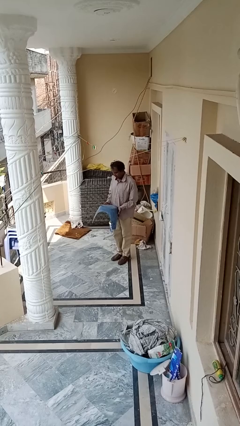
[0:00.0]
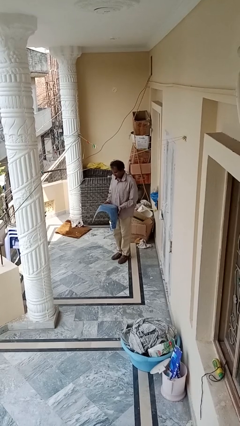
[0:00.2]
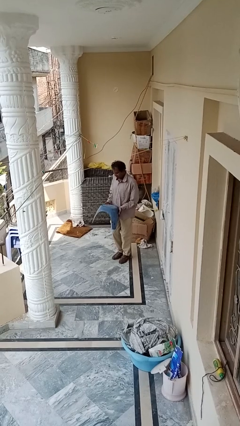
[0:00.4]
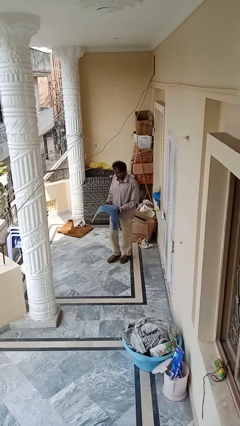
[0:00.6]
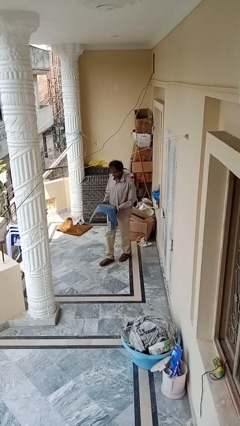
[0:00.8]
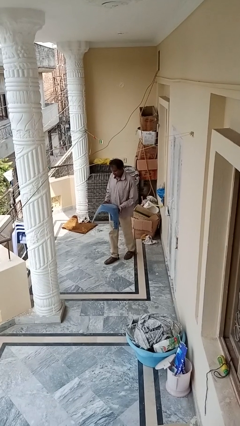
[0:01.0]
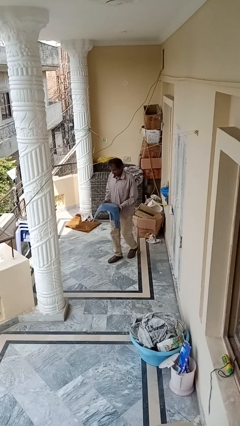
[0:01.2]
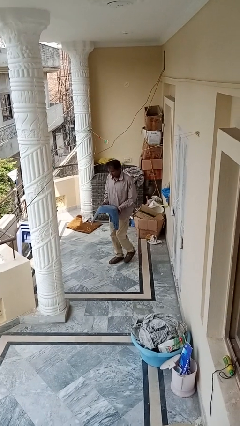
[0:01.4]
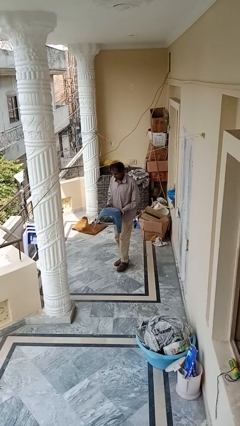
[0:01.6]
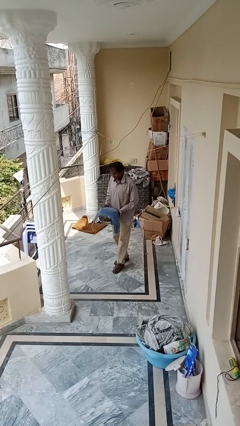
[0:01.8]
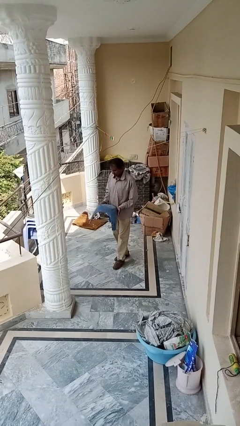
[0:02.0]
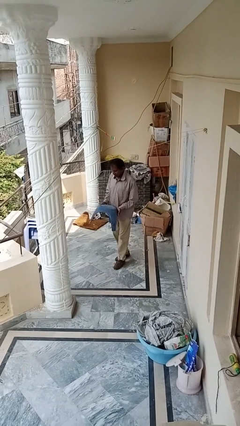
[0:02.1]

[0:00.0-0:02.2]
person carries furniture

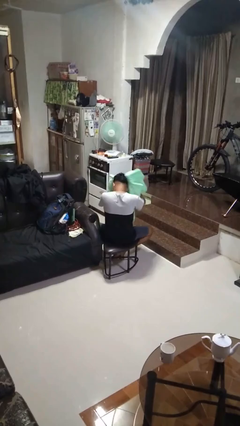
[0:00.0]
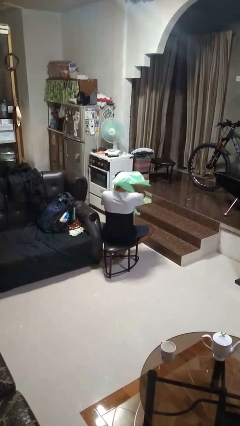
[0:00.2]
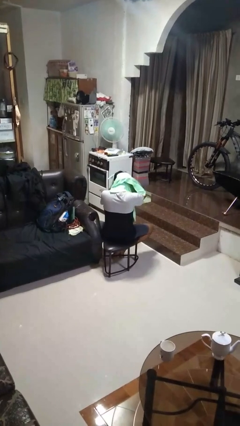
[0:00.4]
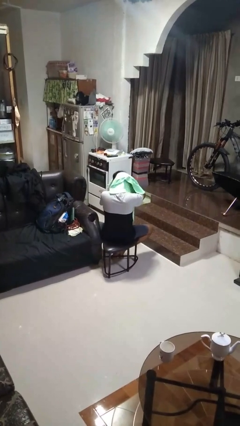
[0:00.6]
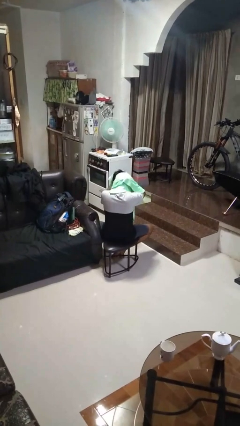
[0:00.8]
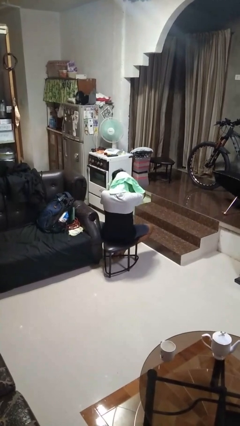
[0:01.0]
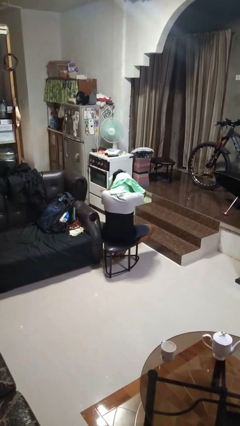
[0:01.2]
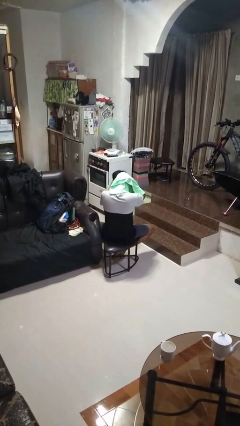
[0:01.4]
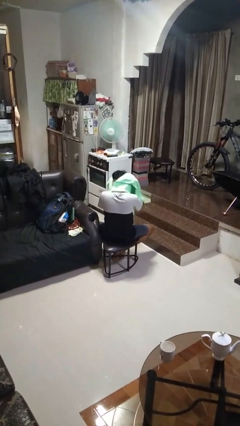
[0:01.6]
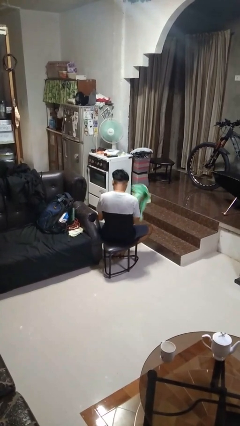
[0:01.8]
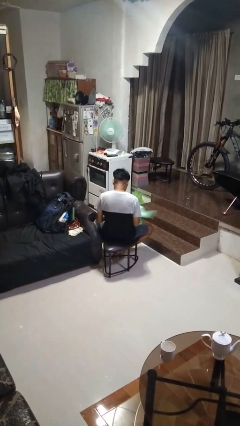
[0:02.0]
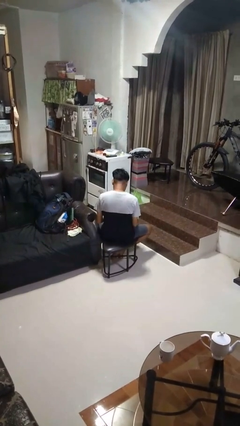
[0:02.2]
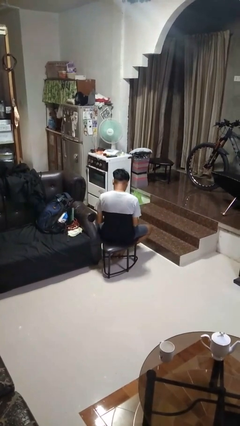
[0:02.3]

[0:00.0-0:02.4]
person dries hair with towel

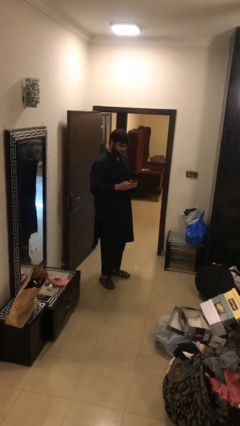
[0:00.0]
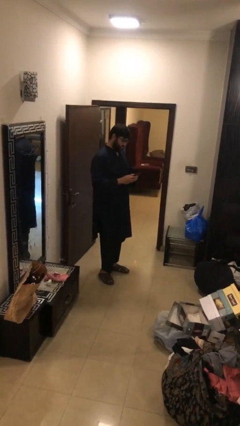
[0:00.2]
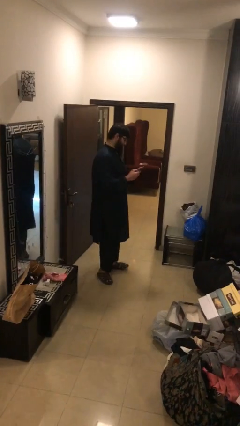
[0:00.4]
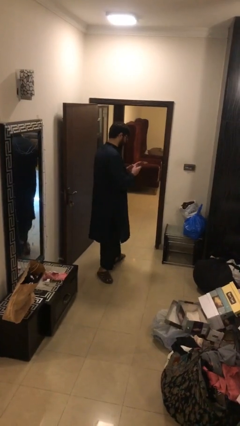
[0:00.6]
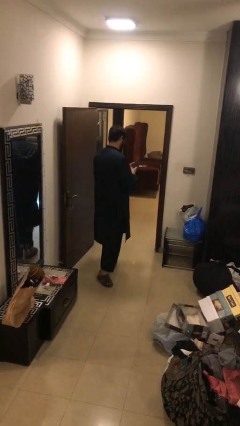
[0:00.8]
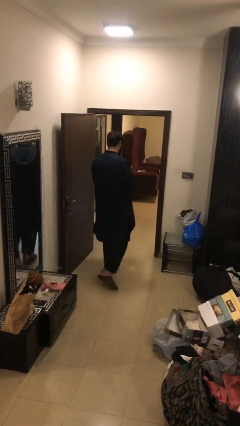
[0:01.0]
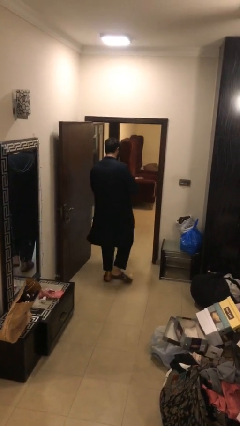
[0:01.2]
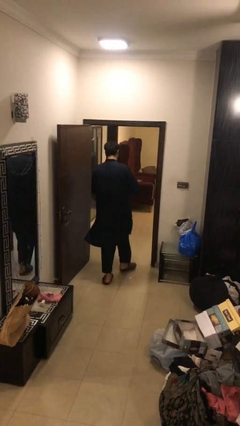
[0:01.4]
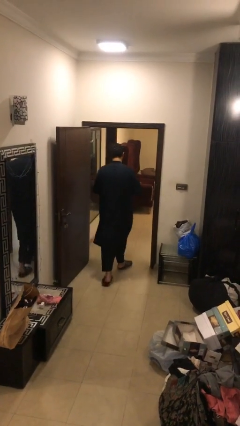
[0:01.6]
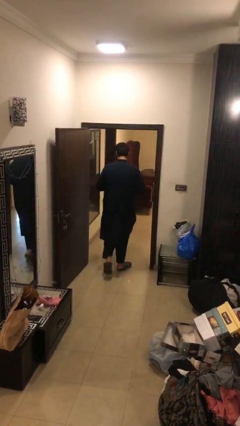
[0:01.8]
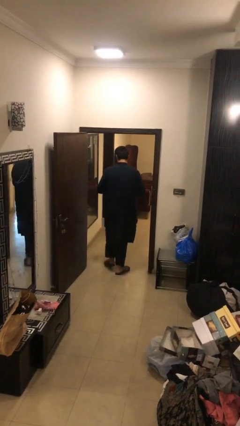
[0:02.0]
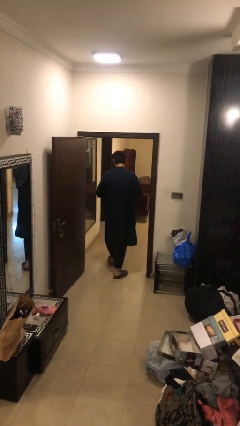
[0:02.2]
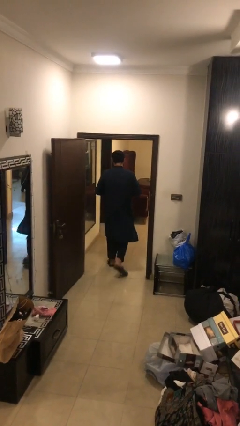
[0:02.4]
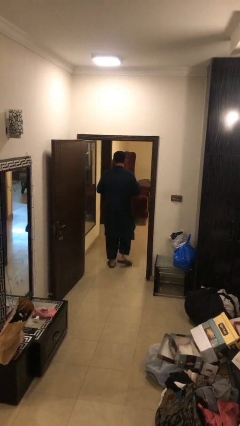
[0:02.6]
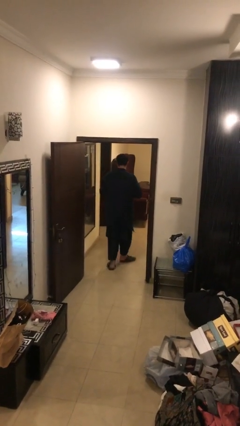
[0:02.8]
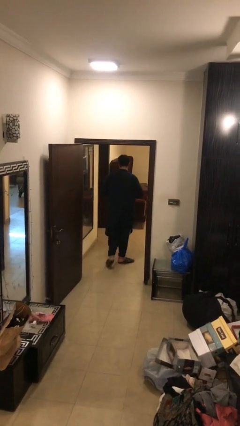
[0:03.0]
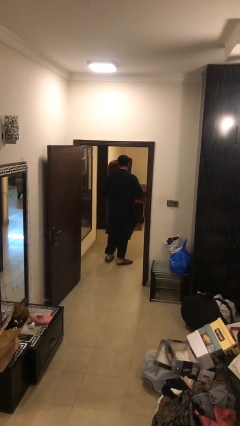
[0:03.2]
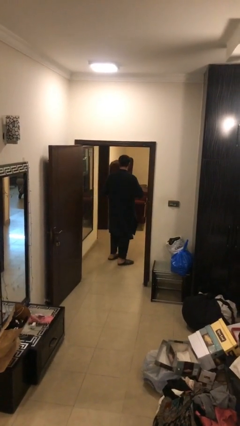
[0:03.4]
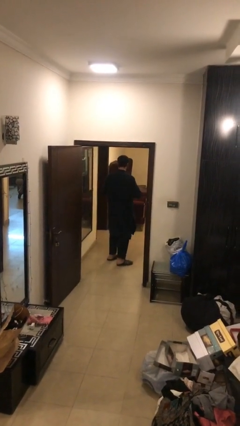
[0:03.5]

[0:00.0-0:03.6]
person exits scene through structure

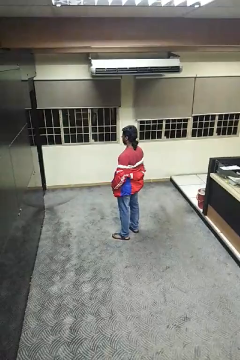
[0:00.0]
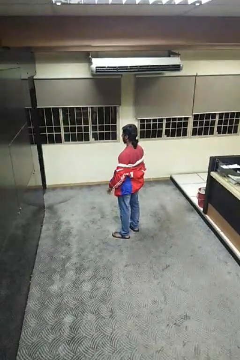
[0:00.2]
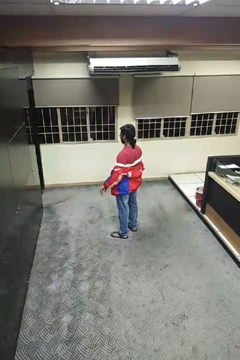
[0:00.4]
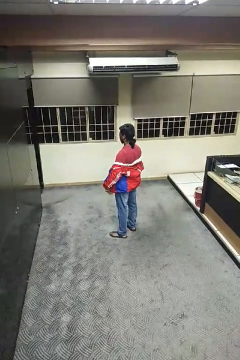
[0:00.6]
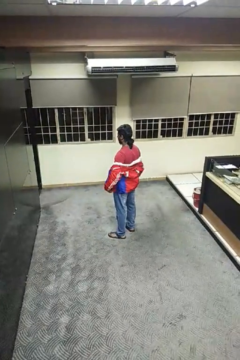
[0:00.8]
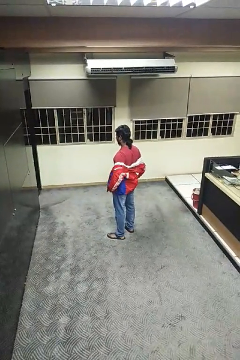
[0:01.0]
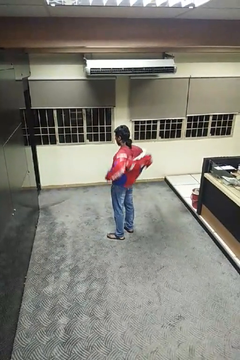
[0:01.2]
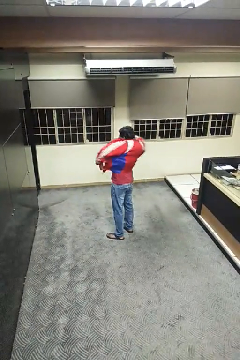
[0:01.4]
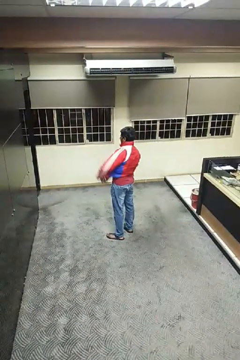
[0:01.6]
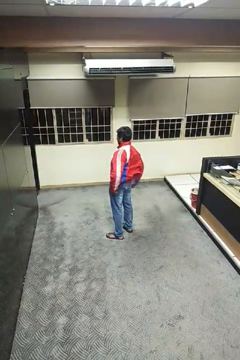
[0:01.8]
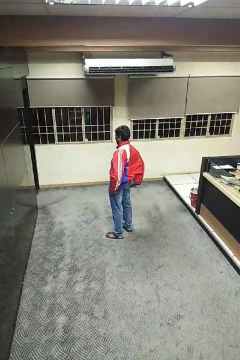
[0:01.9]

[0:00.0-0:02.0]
person puts on jacket

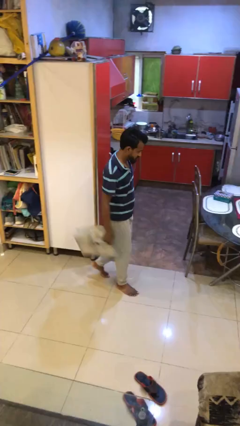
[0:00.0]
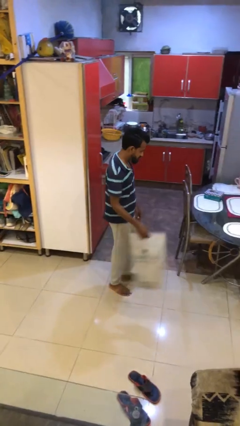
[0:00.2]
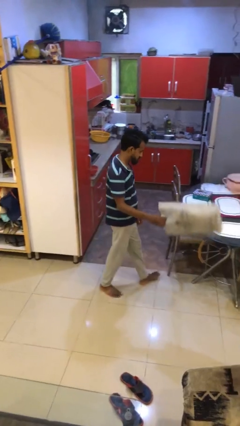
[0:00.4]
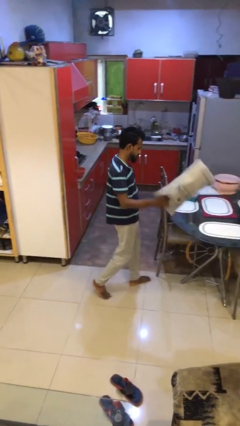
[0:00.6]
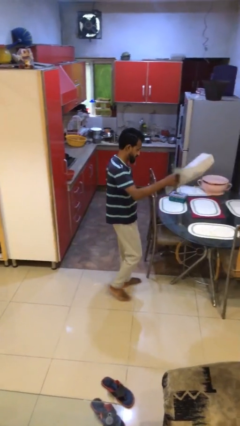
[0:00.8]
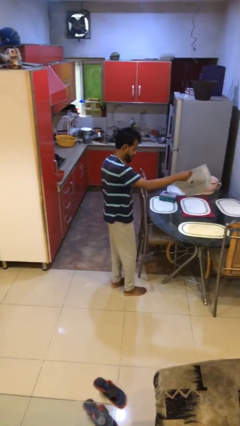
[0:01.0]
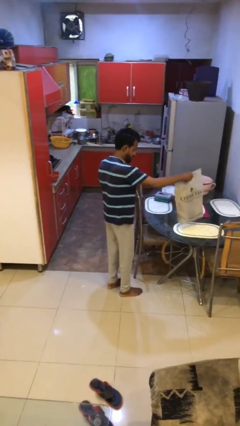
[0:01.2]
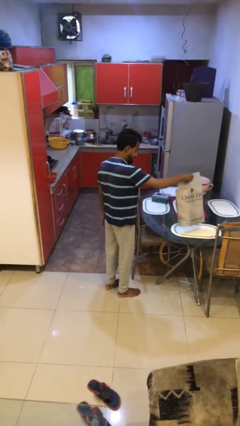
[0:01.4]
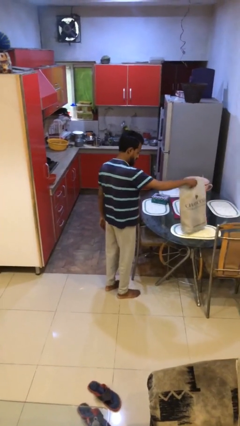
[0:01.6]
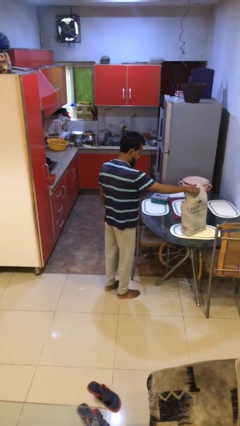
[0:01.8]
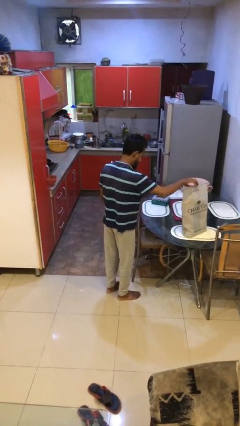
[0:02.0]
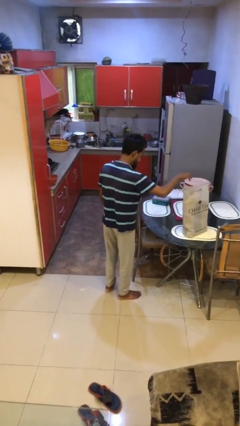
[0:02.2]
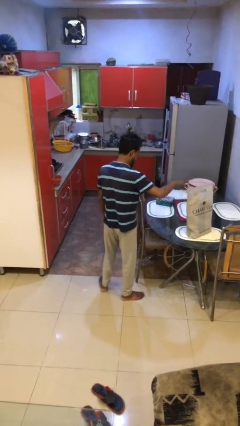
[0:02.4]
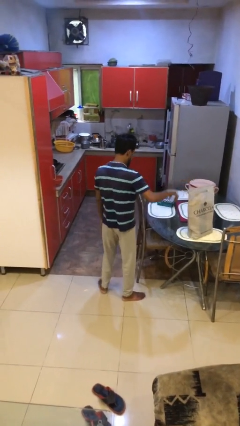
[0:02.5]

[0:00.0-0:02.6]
person puts down object on table

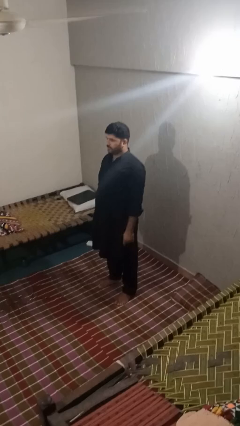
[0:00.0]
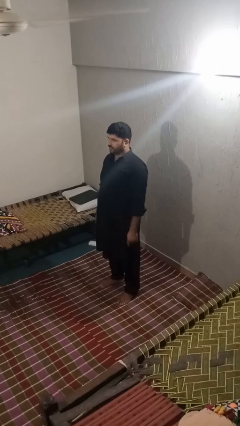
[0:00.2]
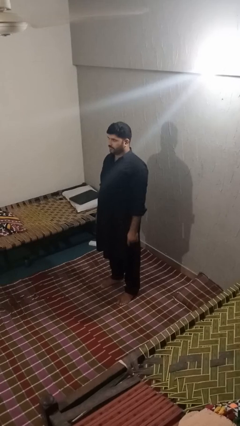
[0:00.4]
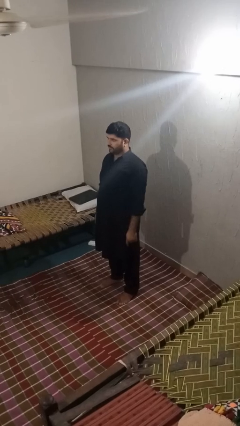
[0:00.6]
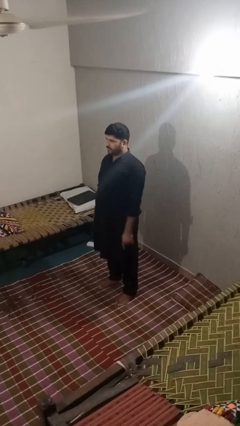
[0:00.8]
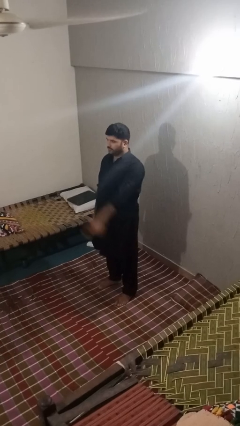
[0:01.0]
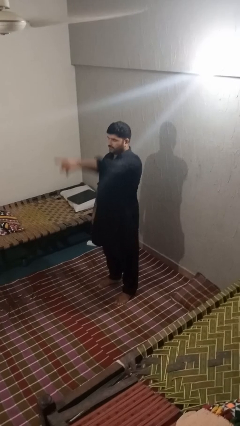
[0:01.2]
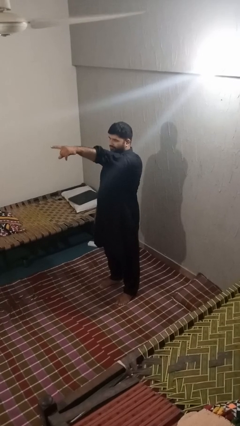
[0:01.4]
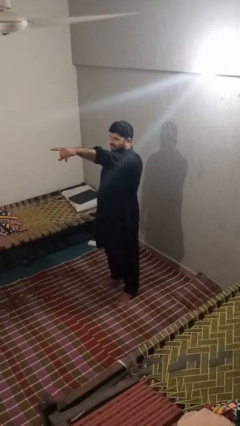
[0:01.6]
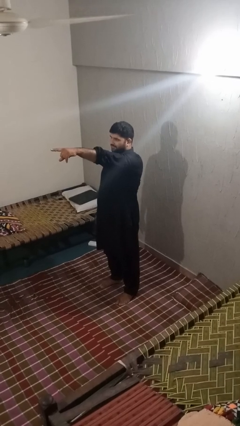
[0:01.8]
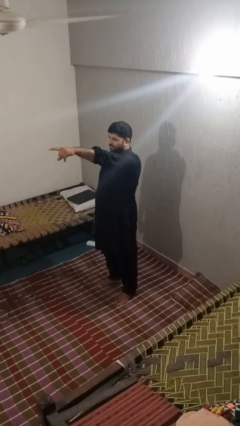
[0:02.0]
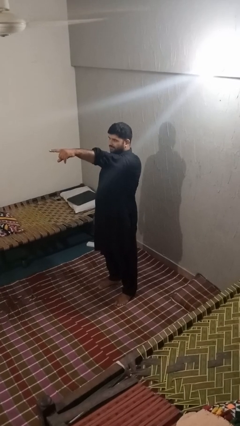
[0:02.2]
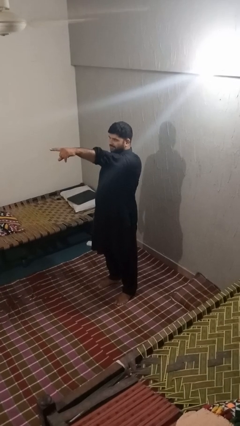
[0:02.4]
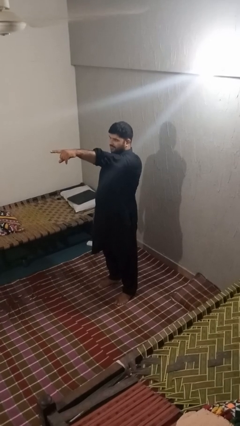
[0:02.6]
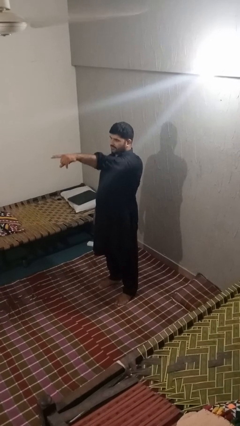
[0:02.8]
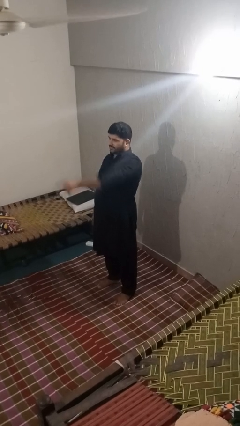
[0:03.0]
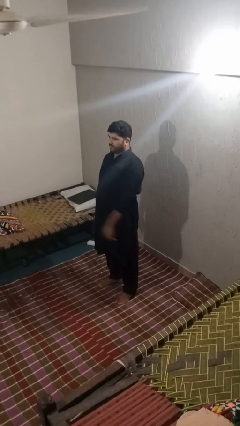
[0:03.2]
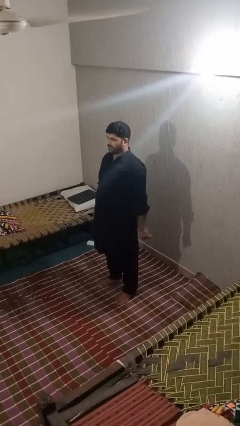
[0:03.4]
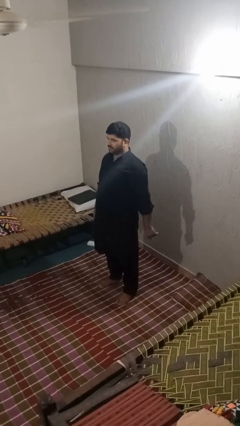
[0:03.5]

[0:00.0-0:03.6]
person points at person

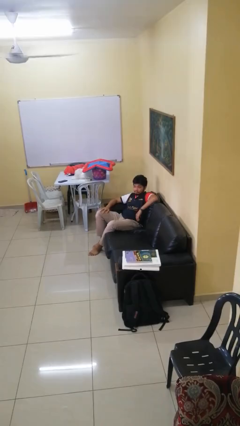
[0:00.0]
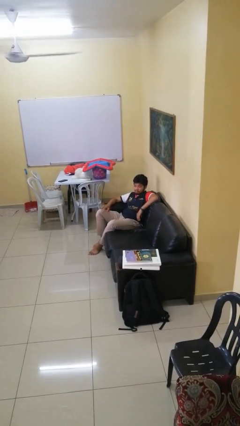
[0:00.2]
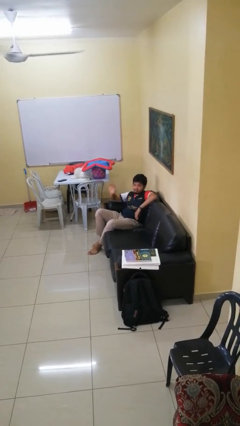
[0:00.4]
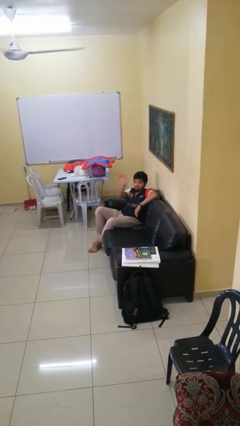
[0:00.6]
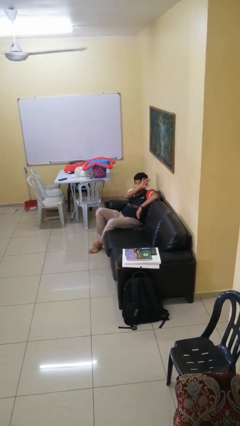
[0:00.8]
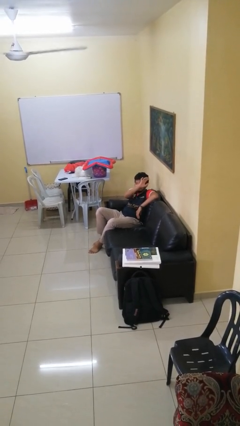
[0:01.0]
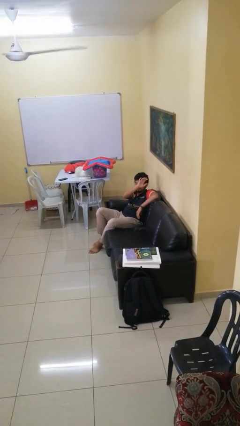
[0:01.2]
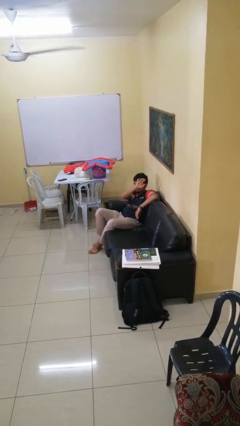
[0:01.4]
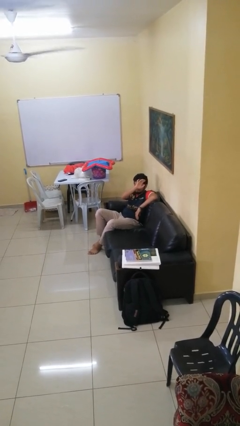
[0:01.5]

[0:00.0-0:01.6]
person gestures swipe left
